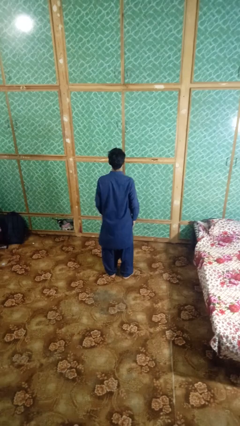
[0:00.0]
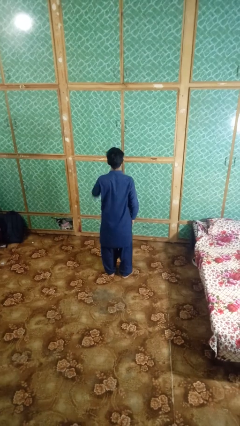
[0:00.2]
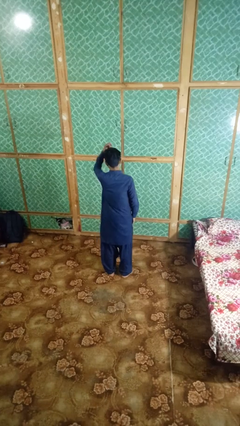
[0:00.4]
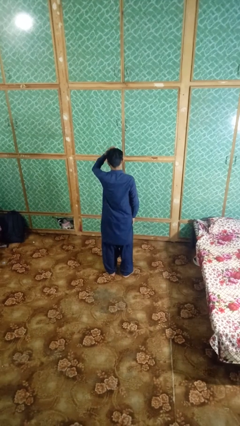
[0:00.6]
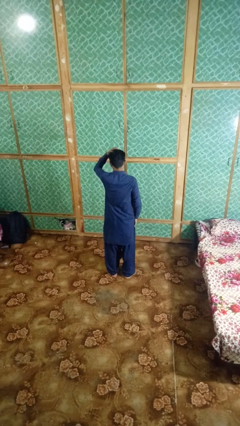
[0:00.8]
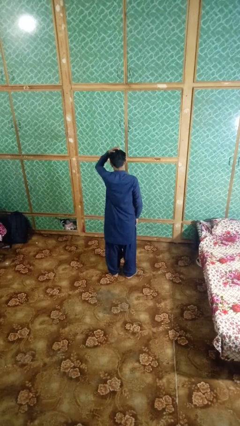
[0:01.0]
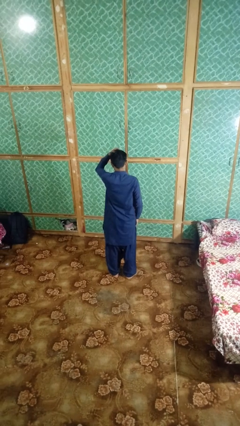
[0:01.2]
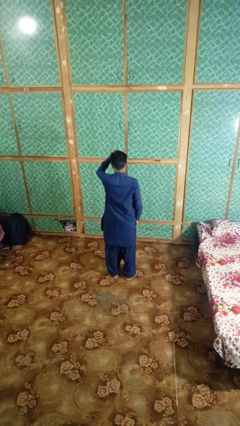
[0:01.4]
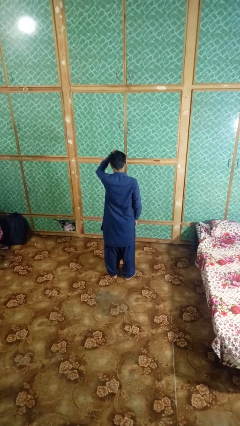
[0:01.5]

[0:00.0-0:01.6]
person strokes hair

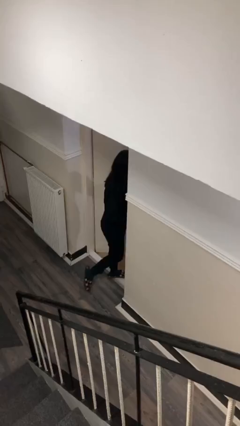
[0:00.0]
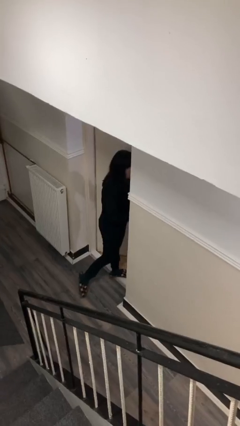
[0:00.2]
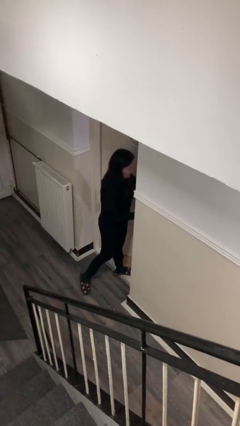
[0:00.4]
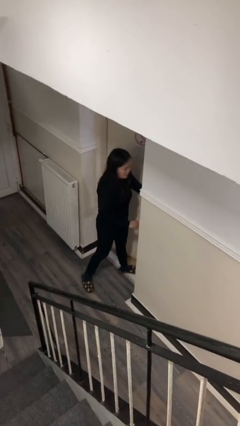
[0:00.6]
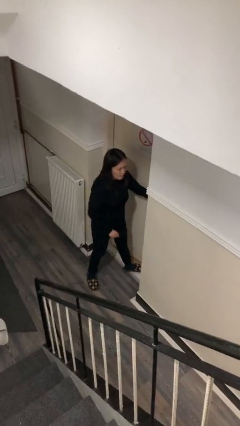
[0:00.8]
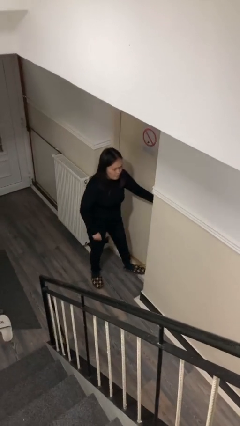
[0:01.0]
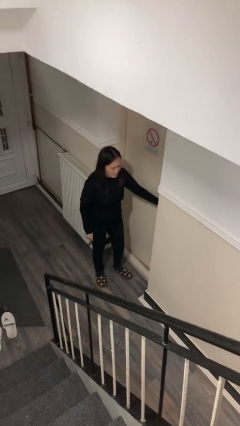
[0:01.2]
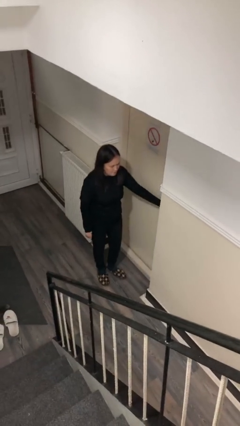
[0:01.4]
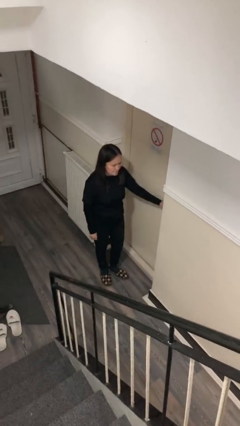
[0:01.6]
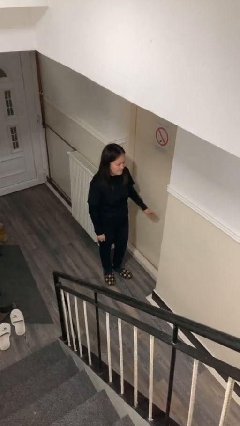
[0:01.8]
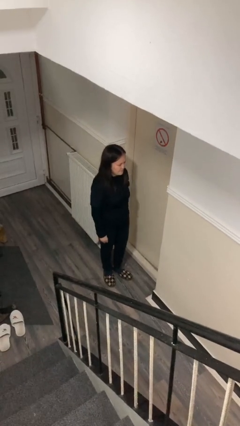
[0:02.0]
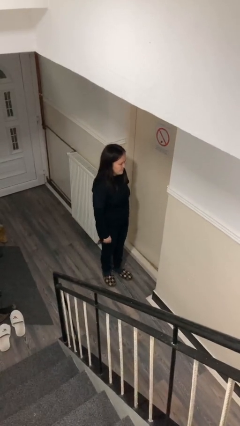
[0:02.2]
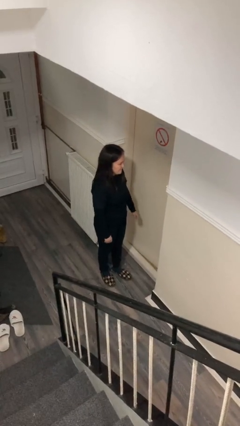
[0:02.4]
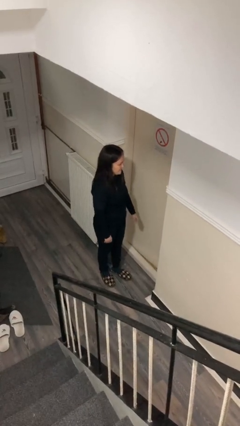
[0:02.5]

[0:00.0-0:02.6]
person closes facility door

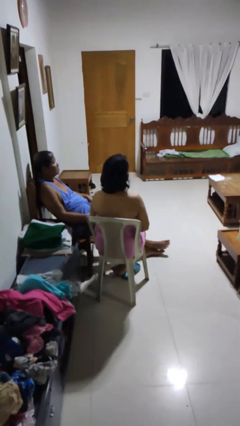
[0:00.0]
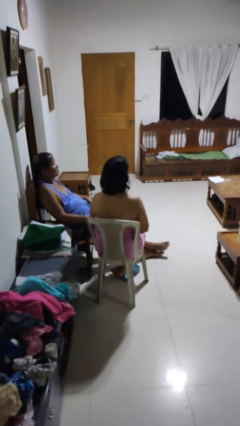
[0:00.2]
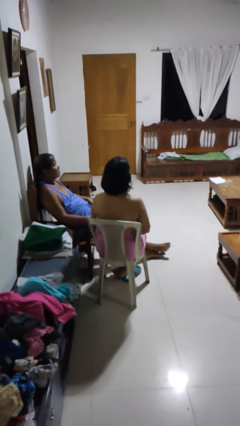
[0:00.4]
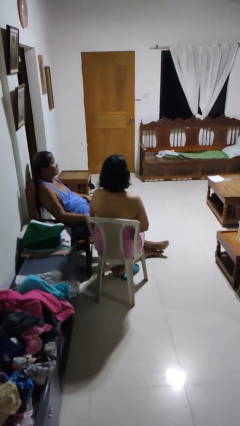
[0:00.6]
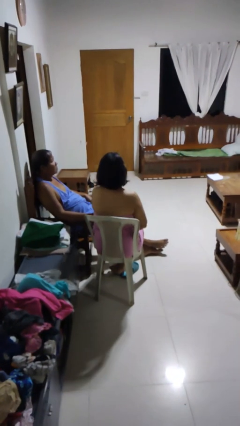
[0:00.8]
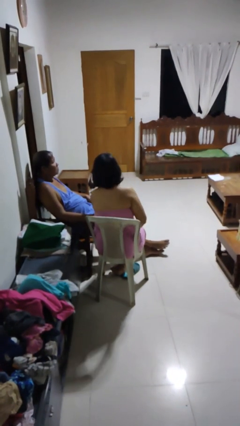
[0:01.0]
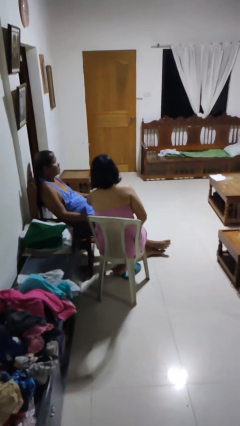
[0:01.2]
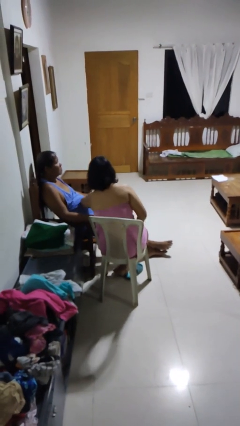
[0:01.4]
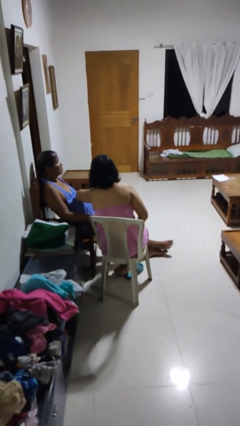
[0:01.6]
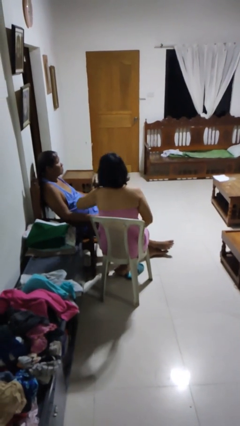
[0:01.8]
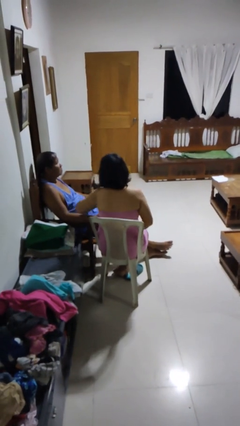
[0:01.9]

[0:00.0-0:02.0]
person nudges person with elbow

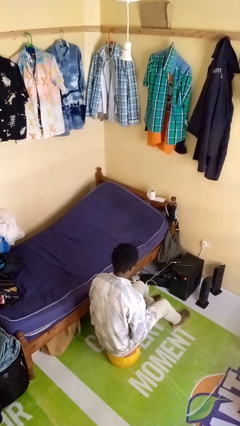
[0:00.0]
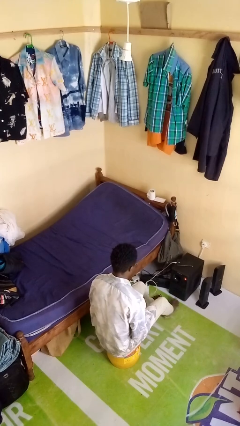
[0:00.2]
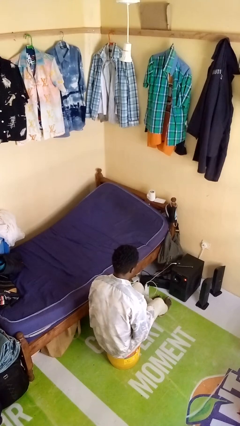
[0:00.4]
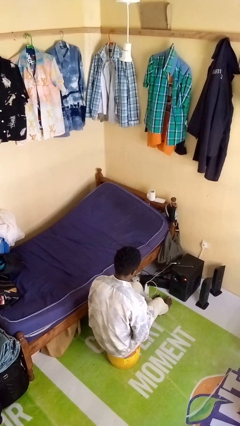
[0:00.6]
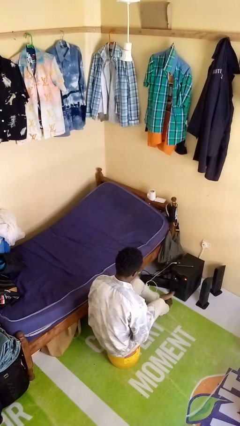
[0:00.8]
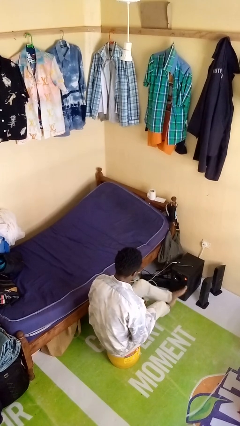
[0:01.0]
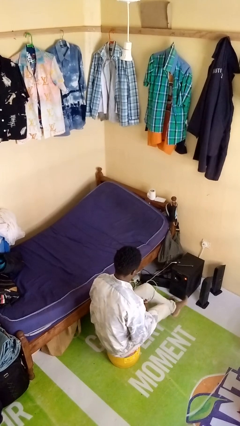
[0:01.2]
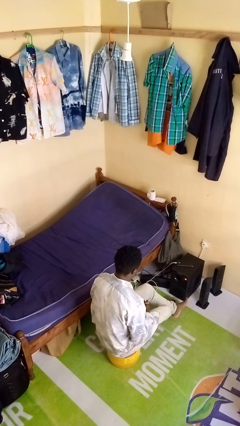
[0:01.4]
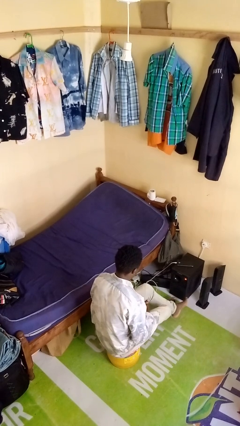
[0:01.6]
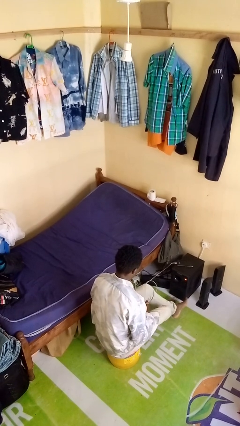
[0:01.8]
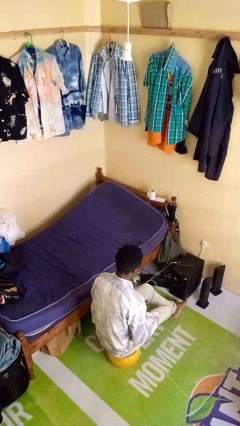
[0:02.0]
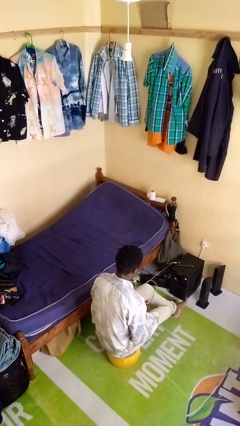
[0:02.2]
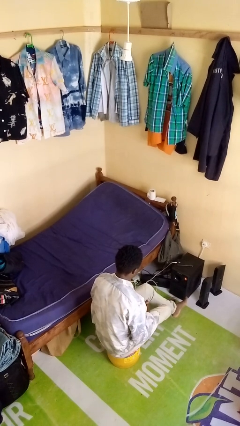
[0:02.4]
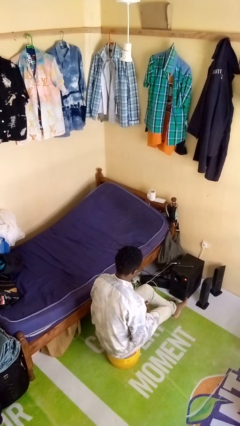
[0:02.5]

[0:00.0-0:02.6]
person crosses legs

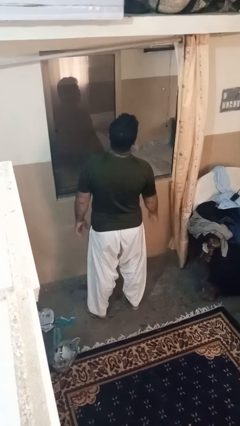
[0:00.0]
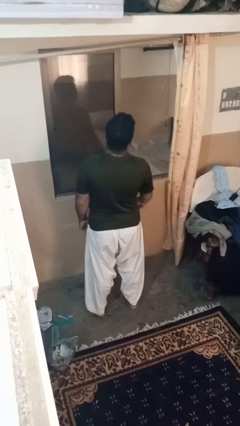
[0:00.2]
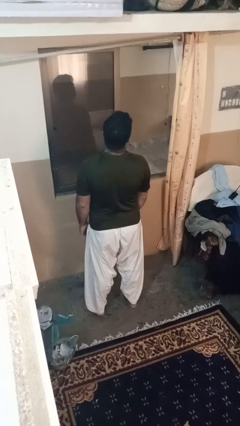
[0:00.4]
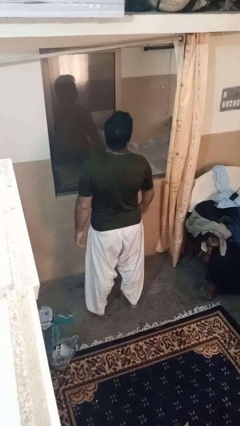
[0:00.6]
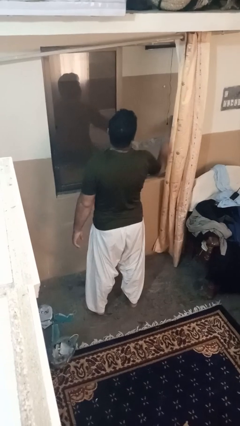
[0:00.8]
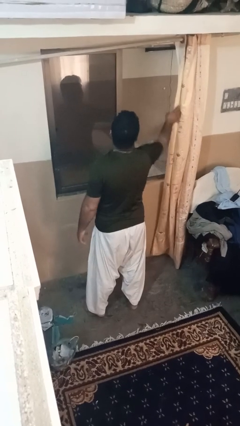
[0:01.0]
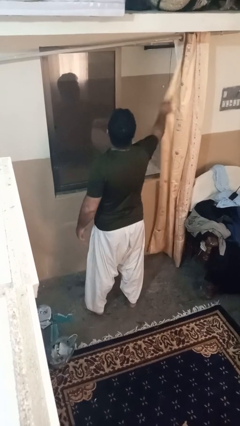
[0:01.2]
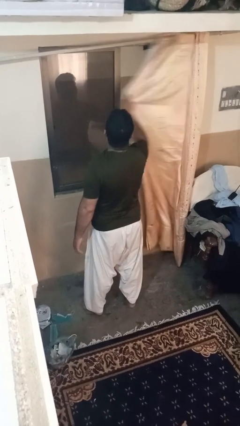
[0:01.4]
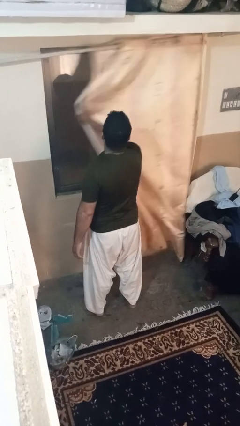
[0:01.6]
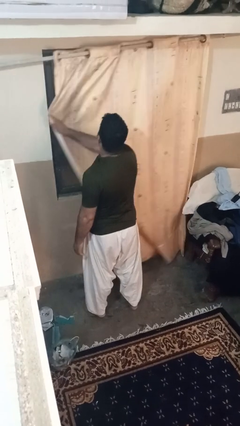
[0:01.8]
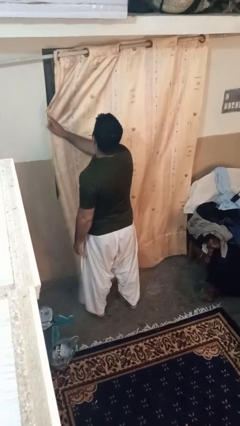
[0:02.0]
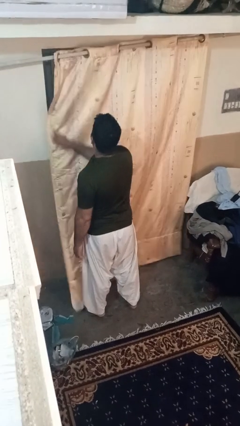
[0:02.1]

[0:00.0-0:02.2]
person closes curtains

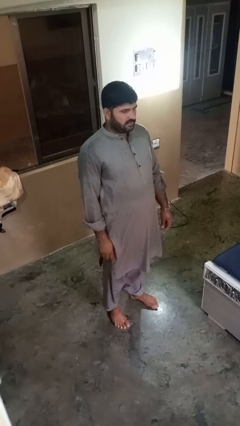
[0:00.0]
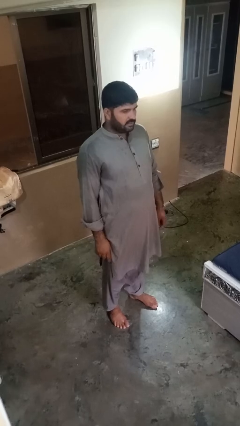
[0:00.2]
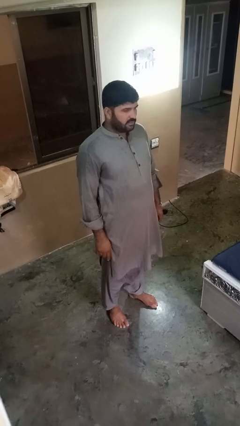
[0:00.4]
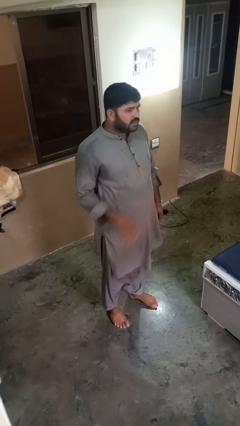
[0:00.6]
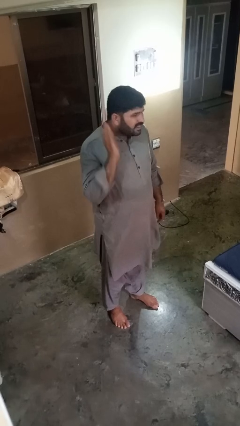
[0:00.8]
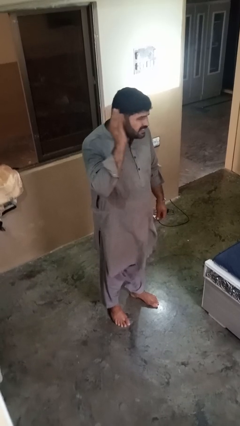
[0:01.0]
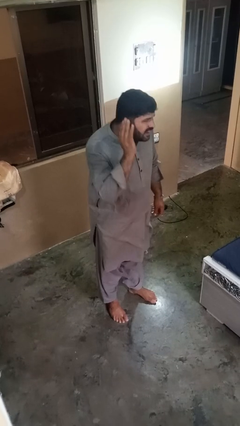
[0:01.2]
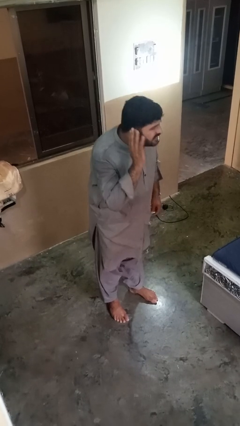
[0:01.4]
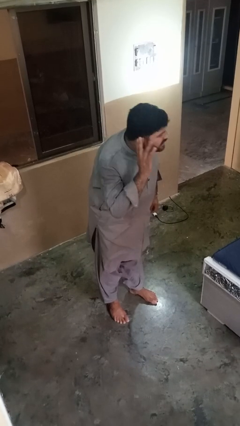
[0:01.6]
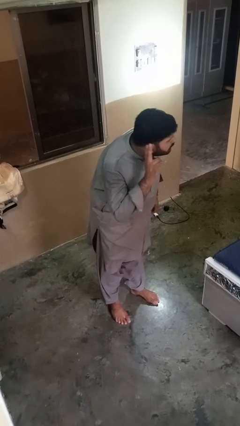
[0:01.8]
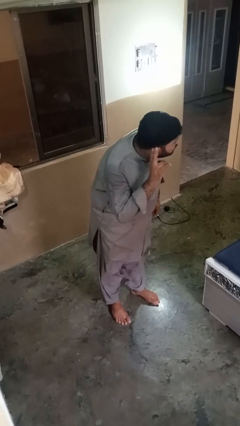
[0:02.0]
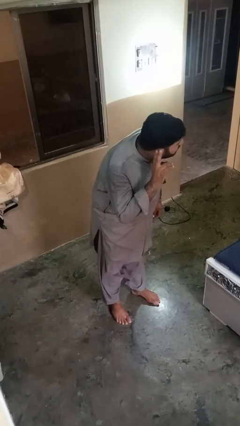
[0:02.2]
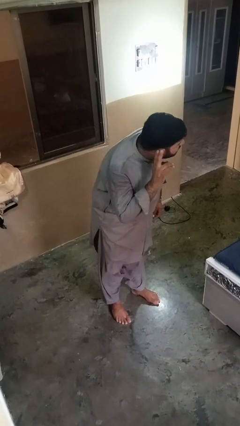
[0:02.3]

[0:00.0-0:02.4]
person gestures listen closely

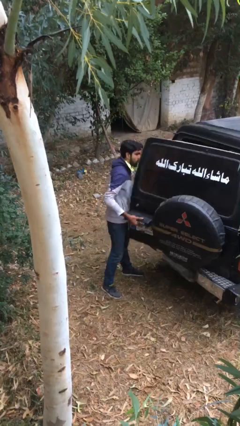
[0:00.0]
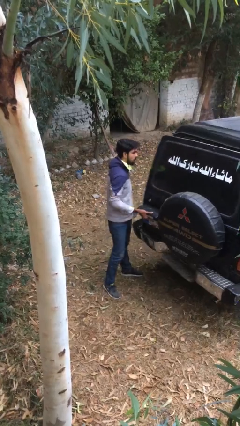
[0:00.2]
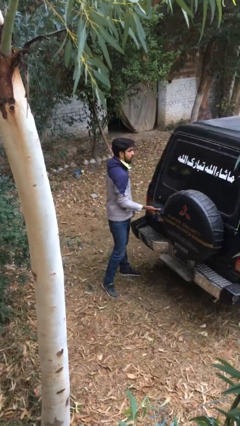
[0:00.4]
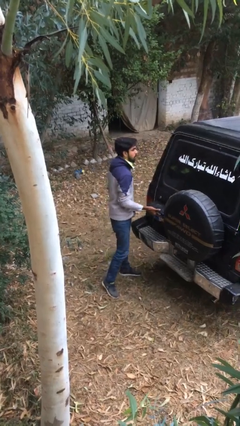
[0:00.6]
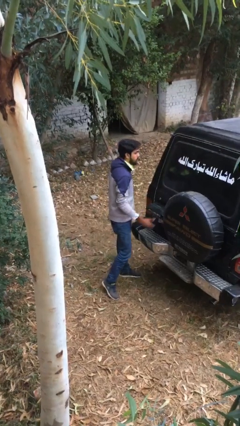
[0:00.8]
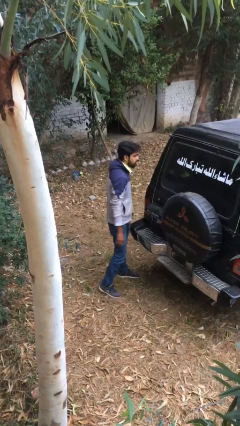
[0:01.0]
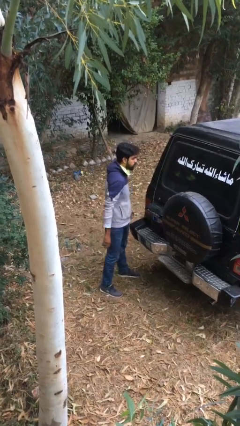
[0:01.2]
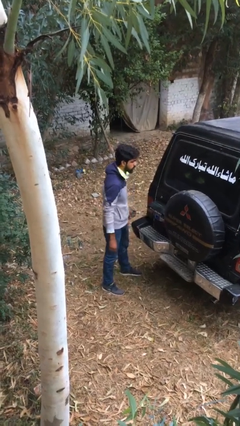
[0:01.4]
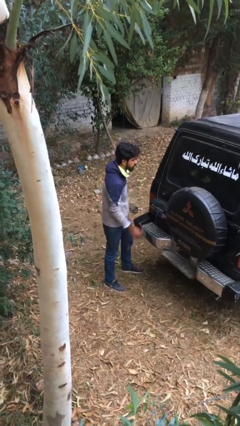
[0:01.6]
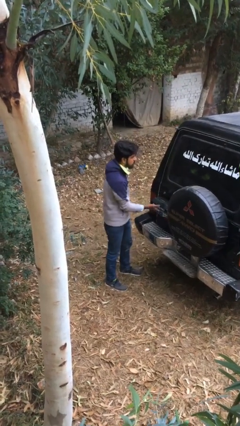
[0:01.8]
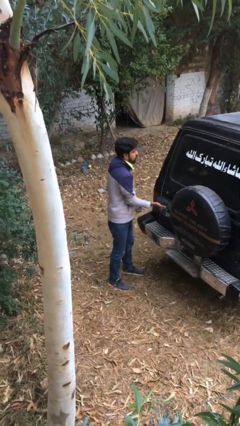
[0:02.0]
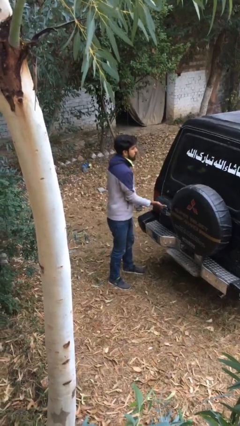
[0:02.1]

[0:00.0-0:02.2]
person closes car trunk

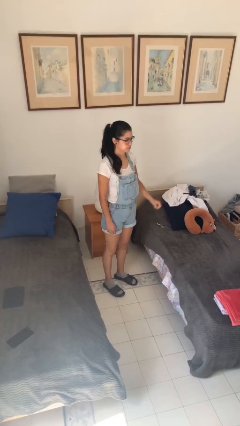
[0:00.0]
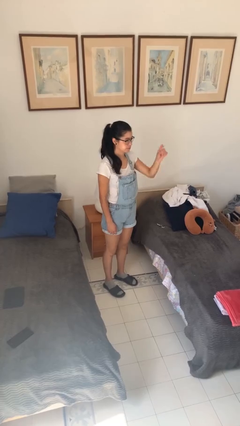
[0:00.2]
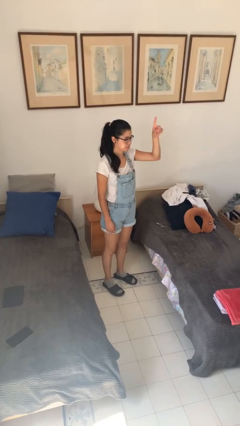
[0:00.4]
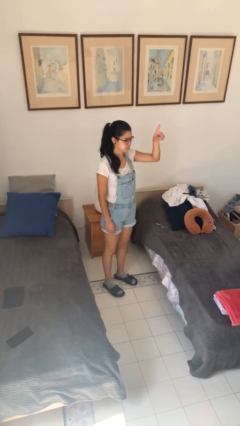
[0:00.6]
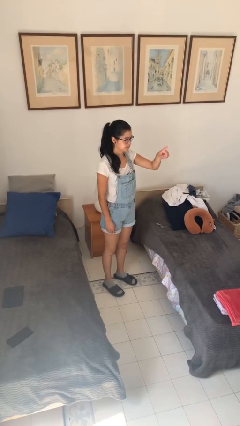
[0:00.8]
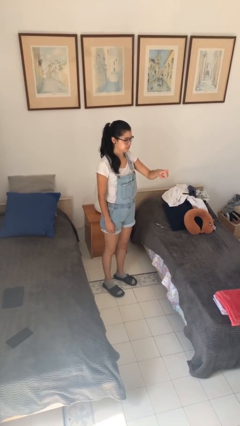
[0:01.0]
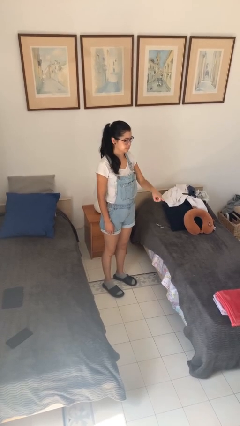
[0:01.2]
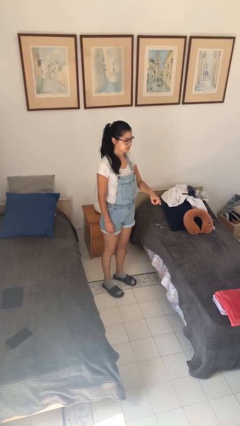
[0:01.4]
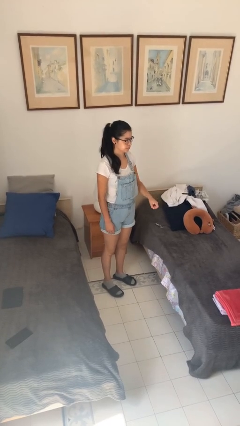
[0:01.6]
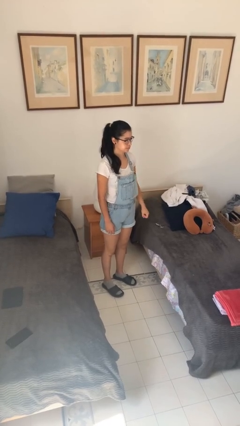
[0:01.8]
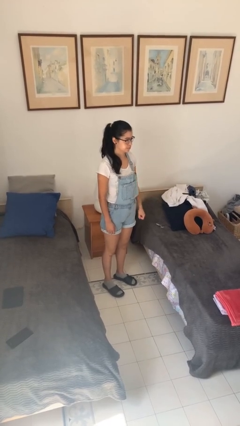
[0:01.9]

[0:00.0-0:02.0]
person gestures number one
